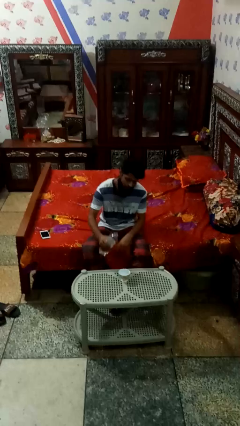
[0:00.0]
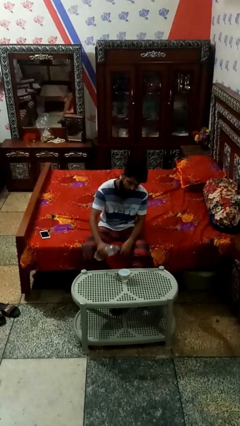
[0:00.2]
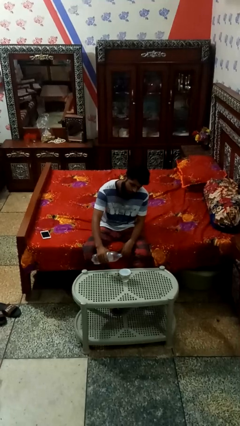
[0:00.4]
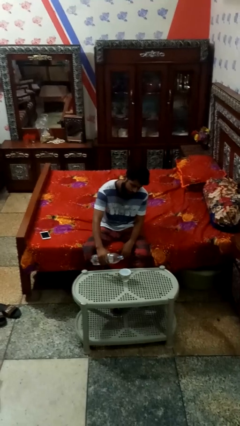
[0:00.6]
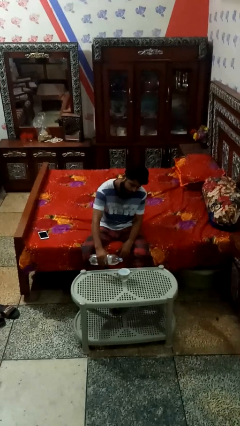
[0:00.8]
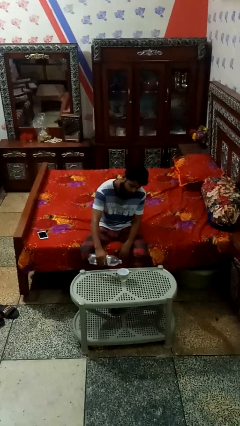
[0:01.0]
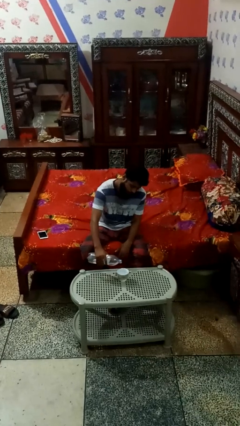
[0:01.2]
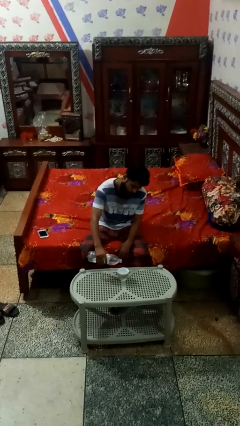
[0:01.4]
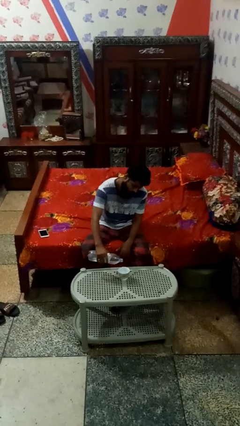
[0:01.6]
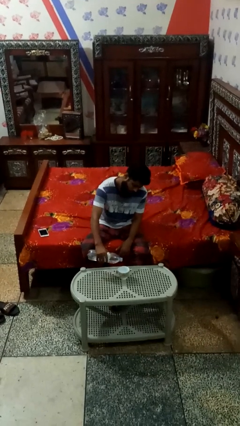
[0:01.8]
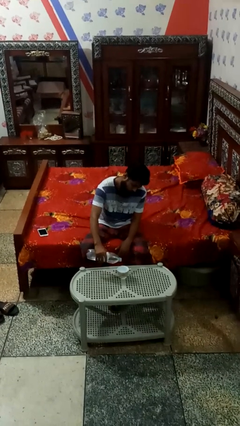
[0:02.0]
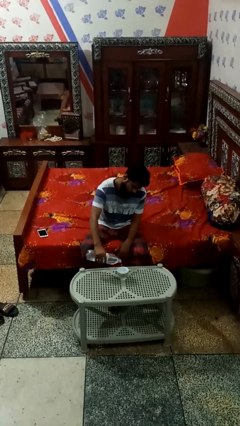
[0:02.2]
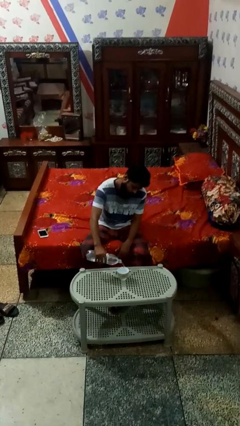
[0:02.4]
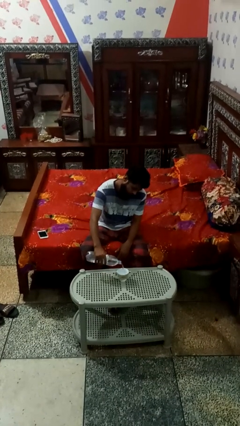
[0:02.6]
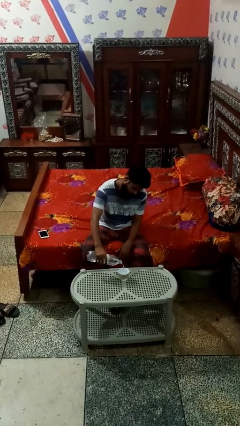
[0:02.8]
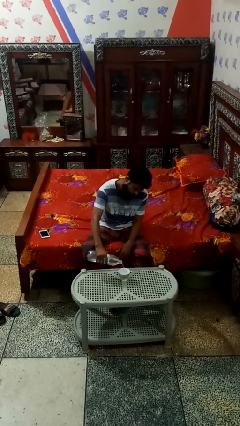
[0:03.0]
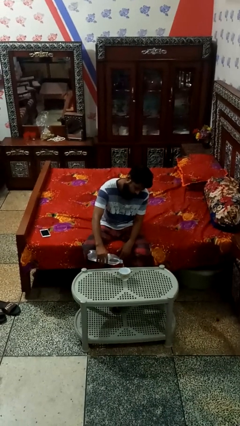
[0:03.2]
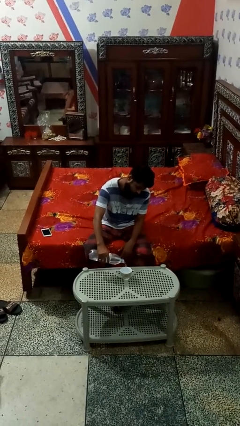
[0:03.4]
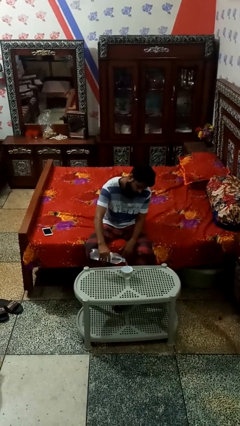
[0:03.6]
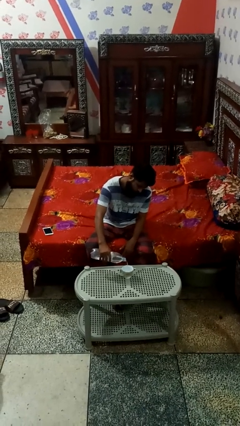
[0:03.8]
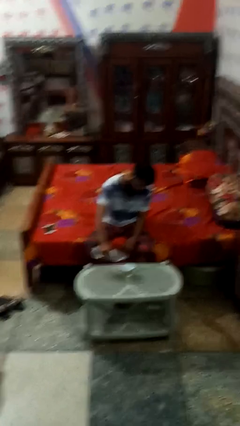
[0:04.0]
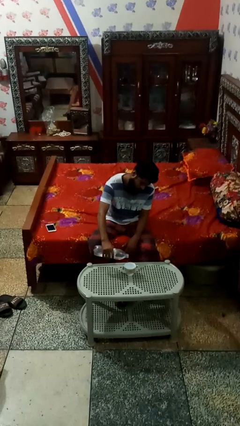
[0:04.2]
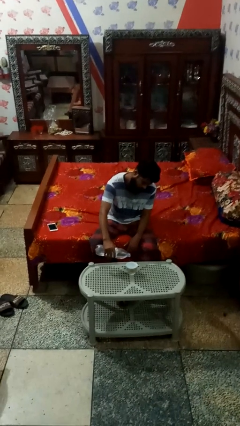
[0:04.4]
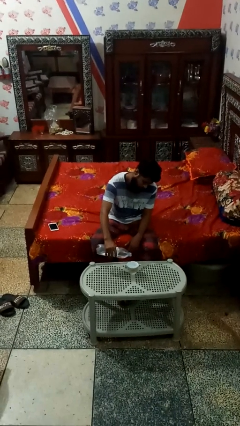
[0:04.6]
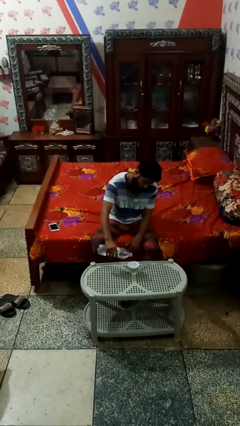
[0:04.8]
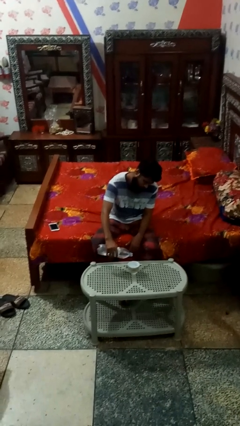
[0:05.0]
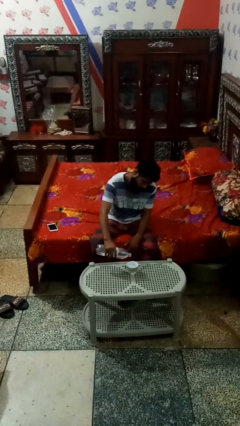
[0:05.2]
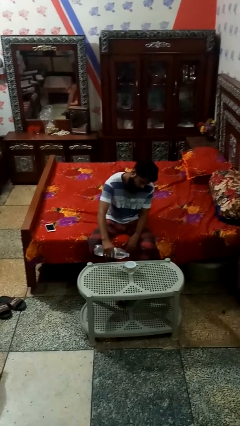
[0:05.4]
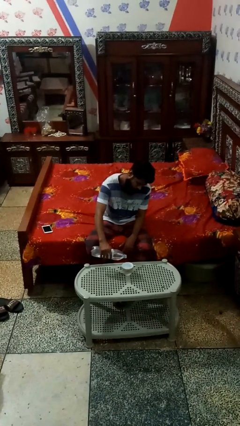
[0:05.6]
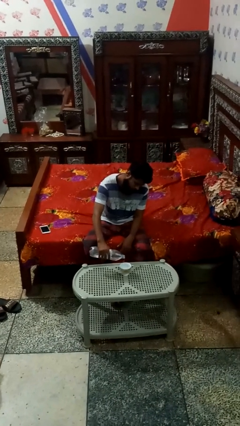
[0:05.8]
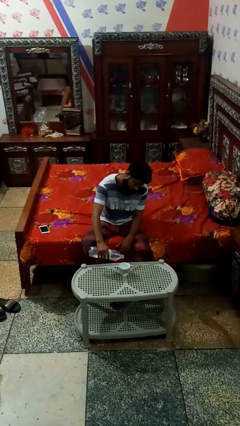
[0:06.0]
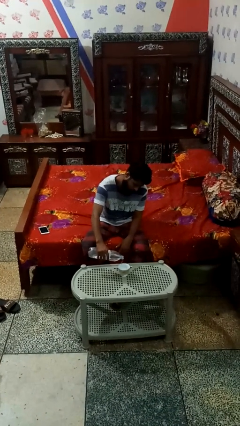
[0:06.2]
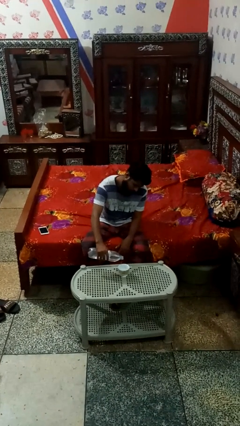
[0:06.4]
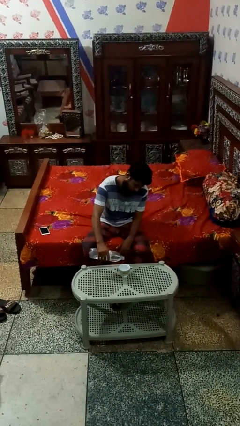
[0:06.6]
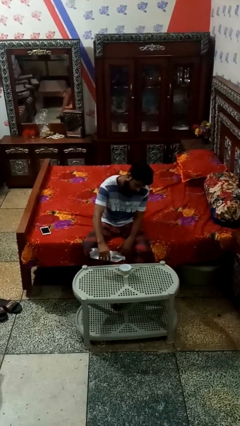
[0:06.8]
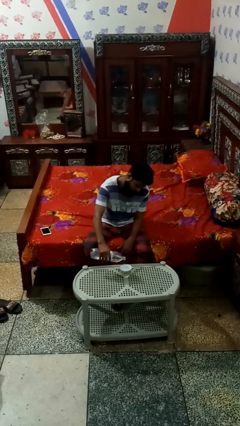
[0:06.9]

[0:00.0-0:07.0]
person pours liquid into cup

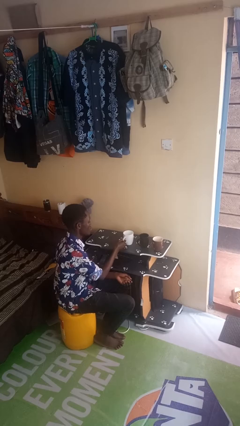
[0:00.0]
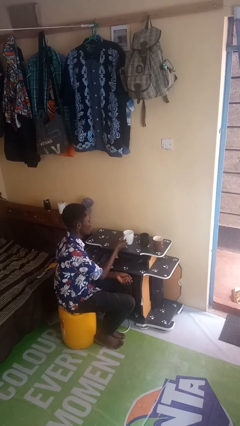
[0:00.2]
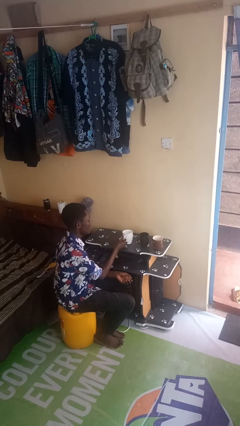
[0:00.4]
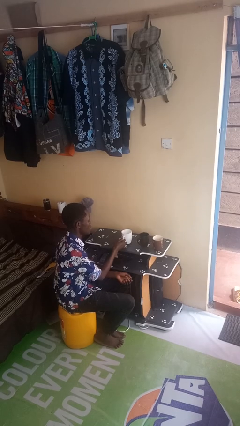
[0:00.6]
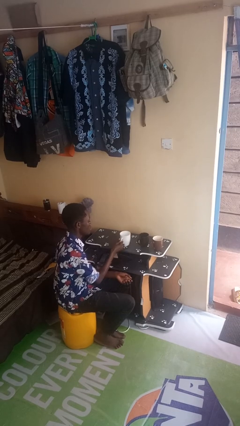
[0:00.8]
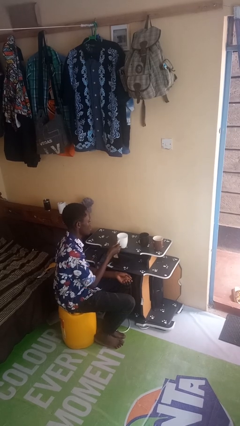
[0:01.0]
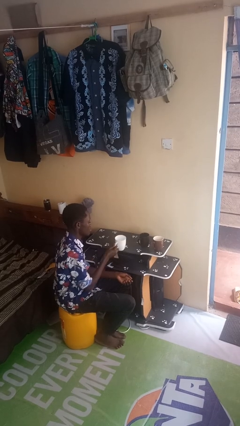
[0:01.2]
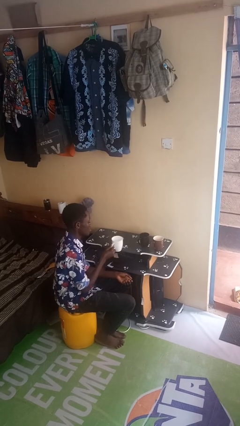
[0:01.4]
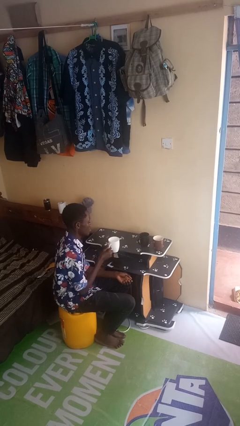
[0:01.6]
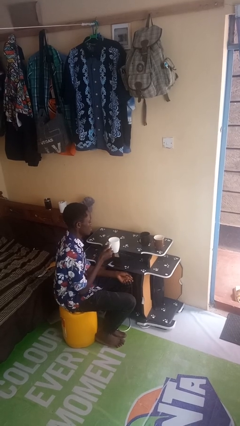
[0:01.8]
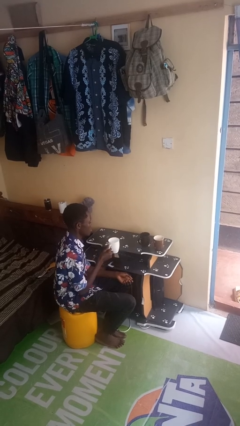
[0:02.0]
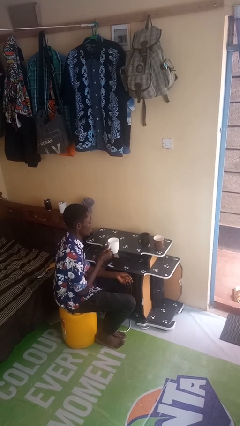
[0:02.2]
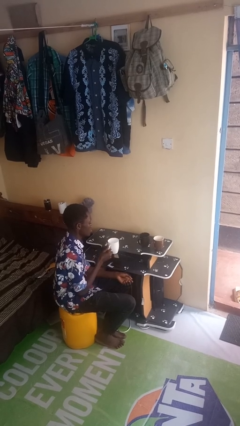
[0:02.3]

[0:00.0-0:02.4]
person picks up object from table

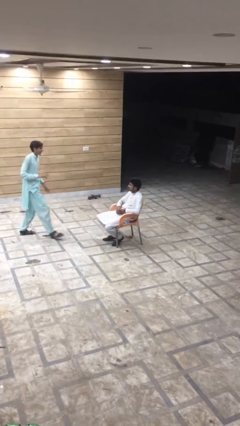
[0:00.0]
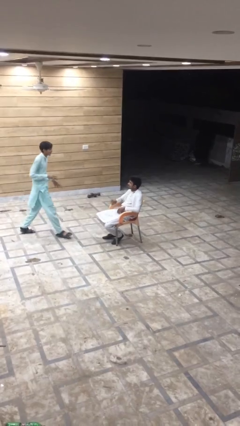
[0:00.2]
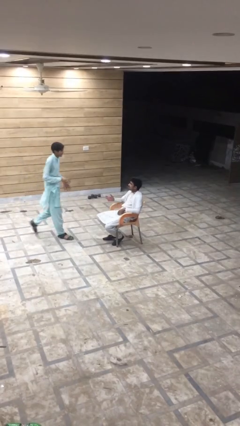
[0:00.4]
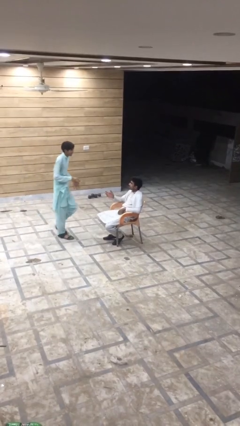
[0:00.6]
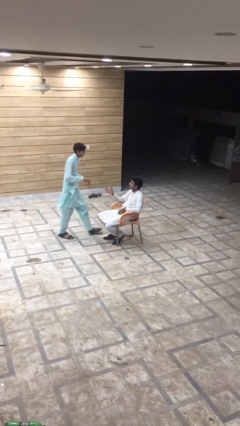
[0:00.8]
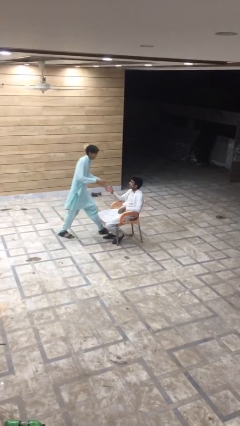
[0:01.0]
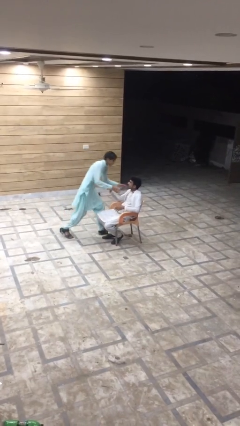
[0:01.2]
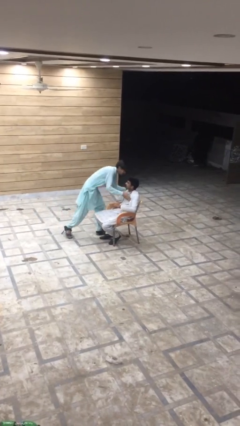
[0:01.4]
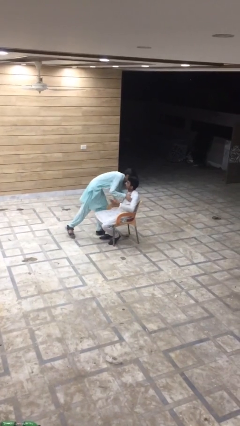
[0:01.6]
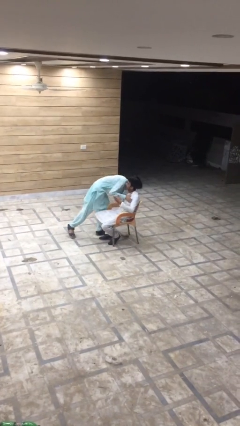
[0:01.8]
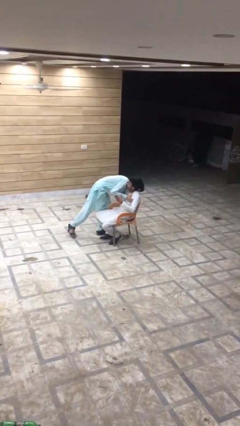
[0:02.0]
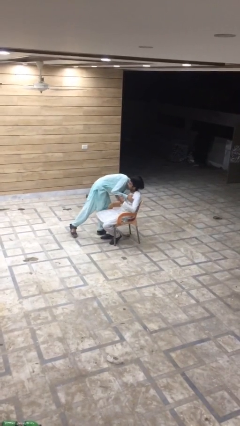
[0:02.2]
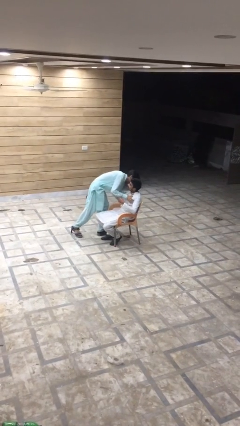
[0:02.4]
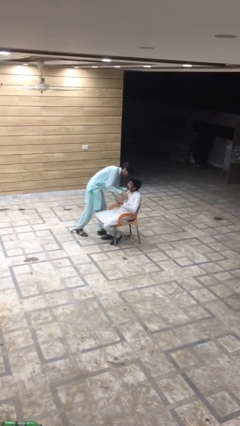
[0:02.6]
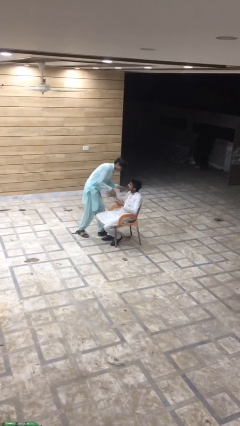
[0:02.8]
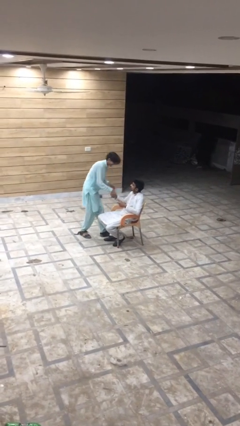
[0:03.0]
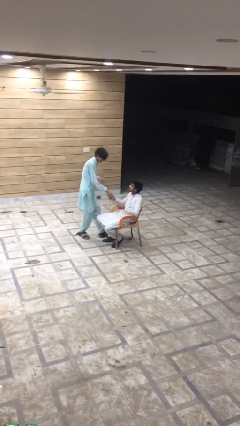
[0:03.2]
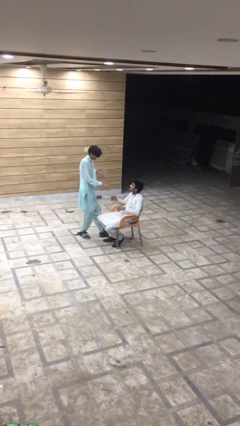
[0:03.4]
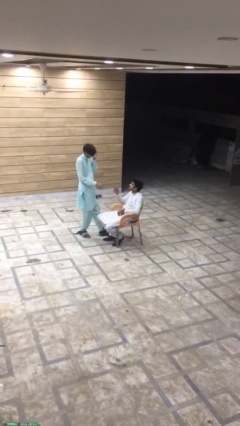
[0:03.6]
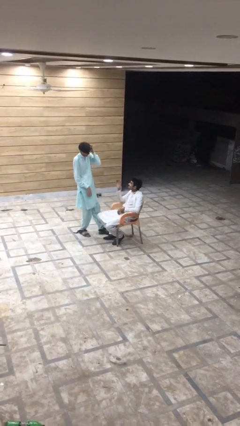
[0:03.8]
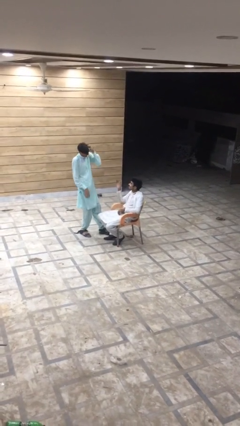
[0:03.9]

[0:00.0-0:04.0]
person embraces person

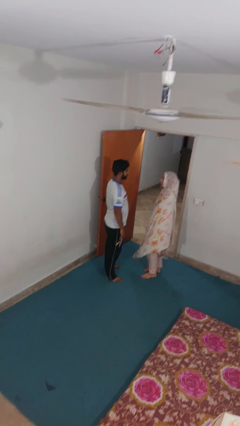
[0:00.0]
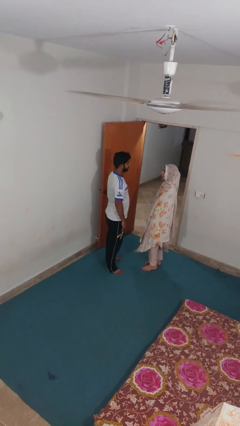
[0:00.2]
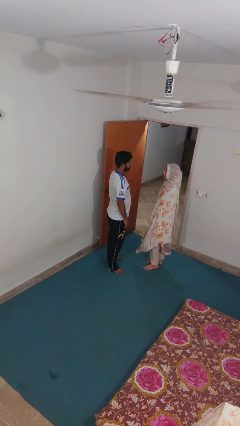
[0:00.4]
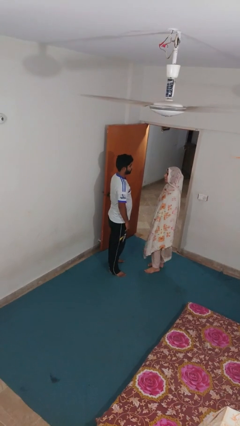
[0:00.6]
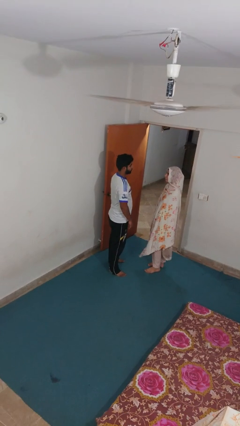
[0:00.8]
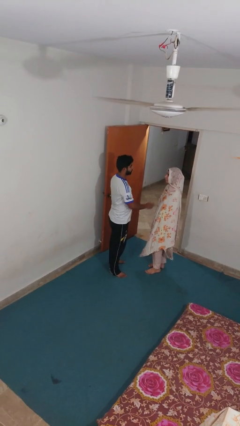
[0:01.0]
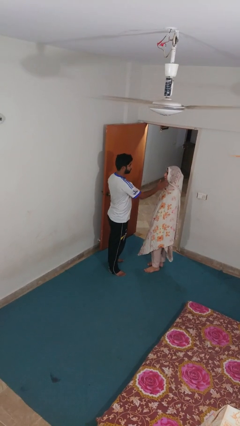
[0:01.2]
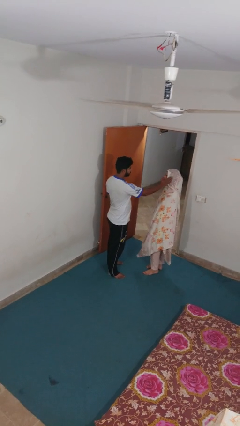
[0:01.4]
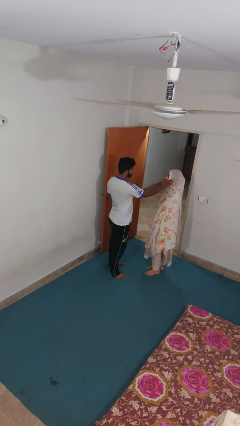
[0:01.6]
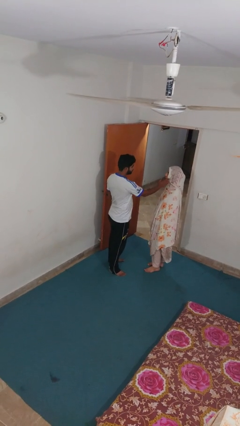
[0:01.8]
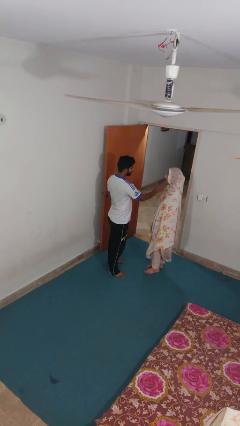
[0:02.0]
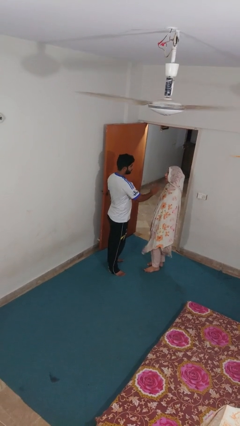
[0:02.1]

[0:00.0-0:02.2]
person touches face of person

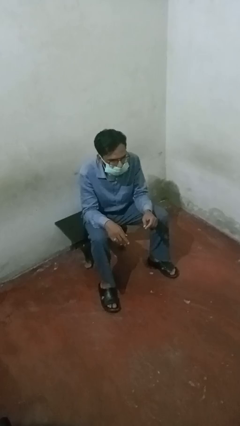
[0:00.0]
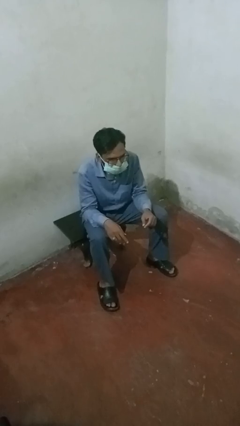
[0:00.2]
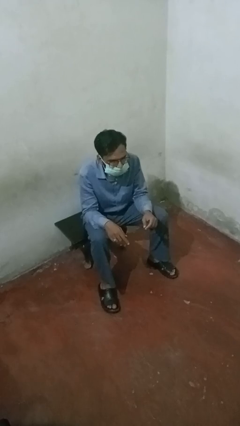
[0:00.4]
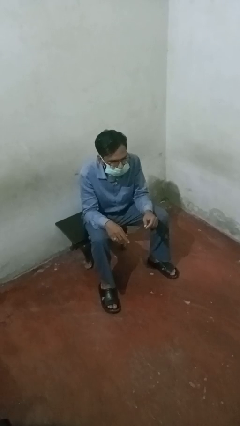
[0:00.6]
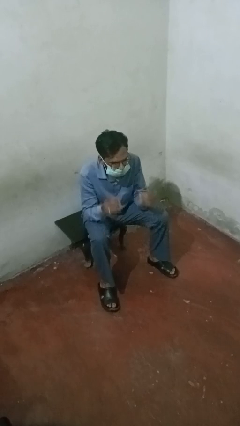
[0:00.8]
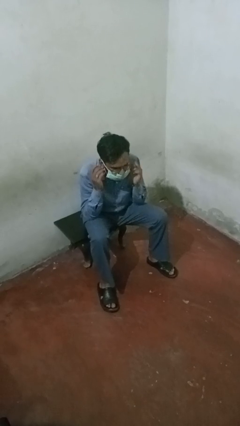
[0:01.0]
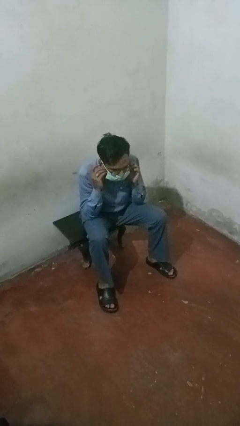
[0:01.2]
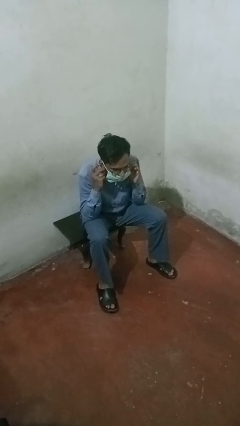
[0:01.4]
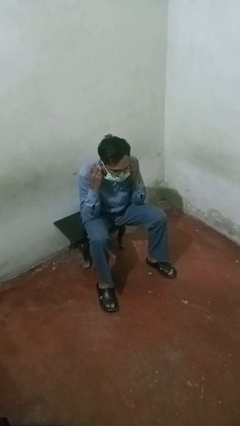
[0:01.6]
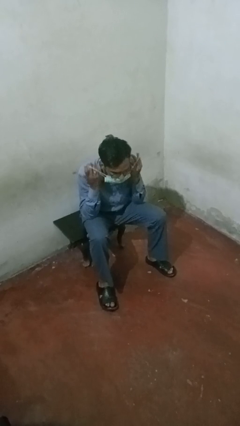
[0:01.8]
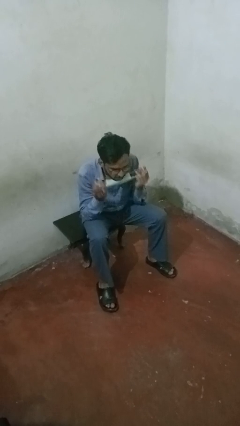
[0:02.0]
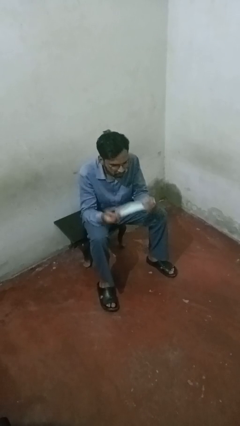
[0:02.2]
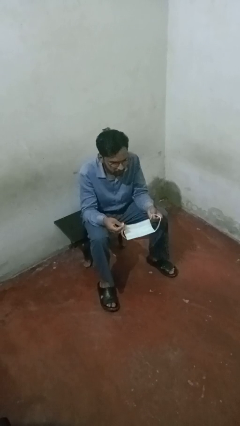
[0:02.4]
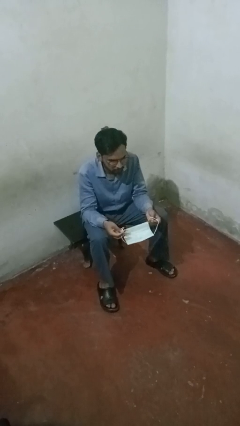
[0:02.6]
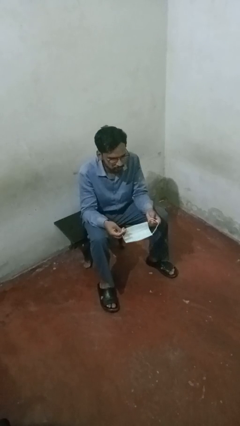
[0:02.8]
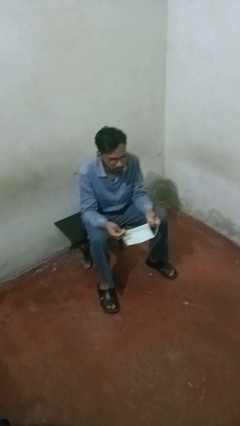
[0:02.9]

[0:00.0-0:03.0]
person takes off facemask
